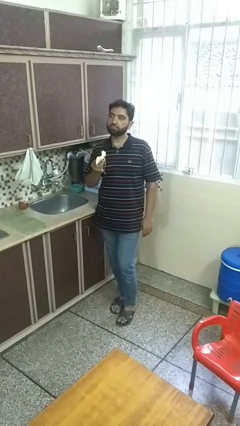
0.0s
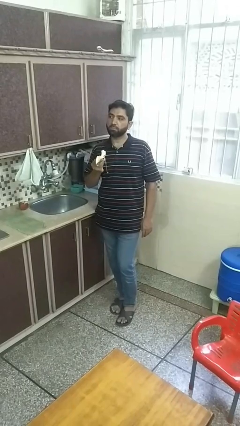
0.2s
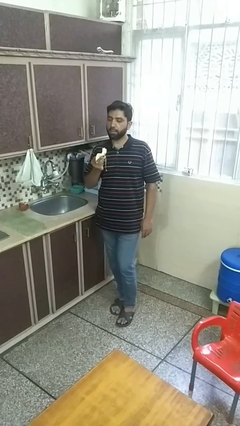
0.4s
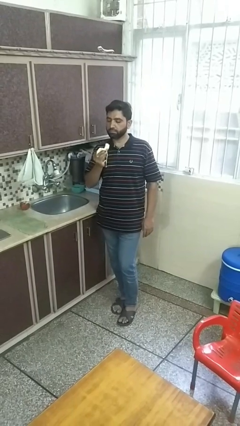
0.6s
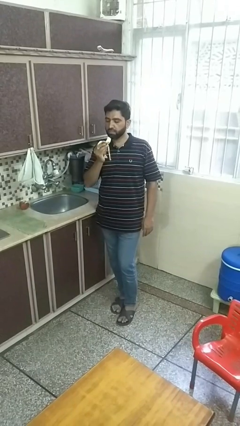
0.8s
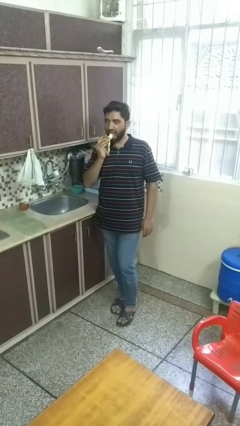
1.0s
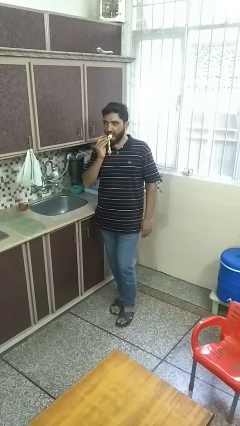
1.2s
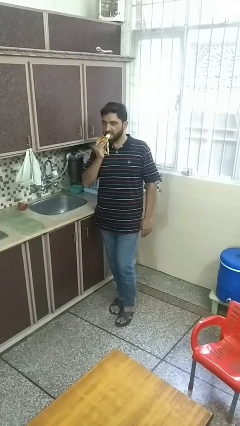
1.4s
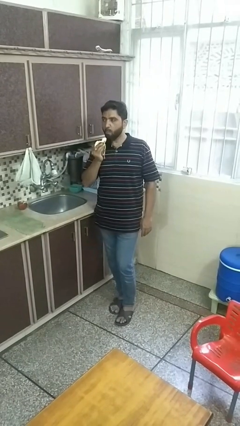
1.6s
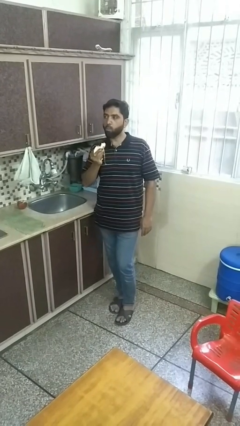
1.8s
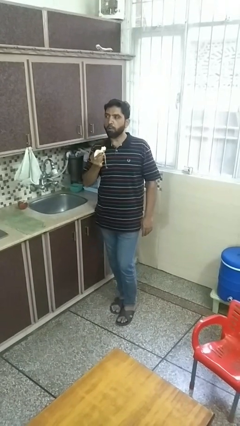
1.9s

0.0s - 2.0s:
person eats banana

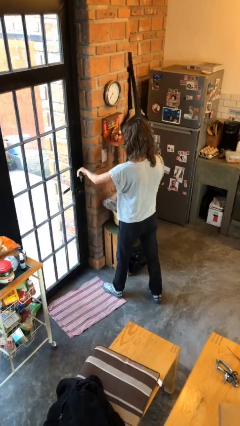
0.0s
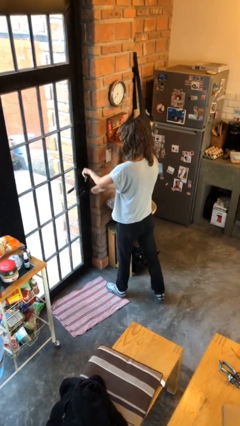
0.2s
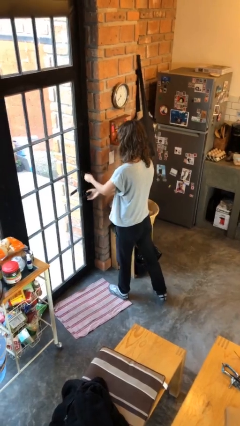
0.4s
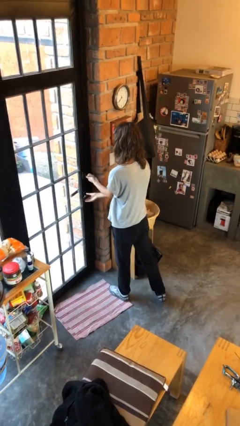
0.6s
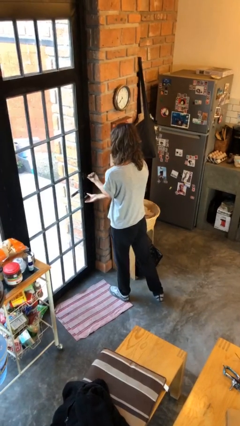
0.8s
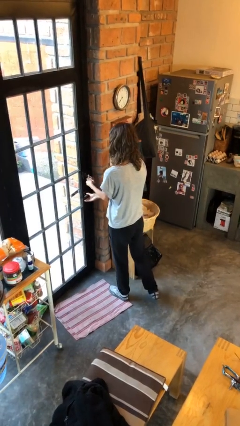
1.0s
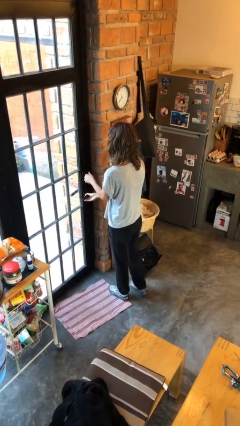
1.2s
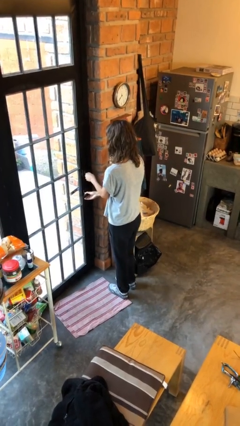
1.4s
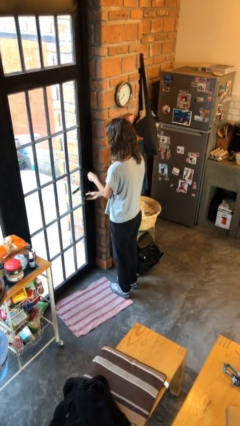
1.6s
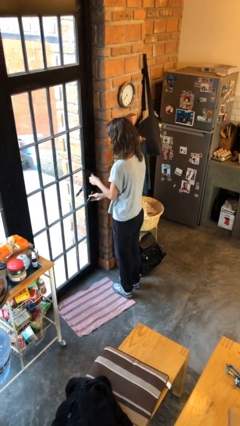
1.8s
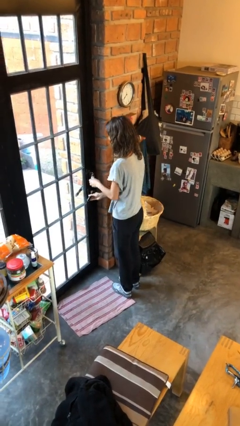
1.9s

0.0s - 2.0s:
person unlocks door with keys

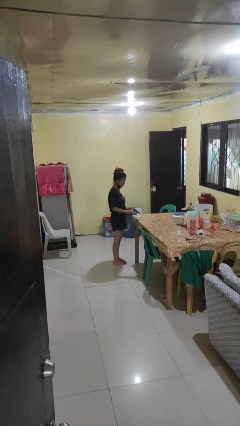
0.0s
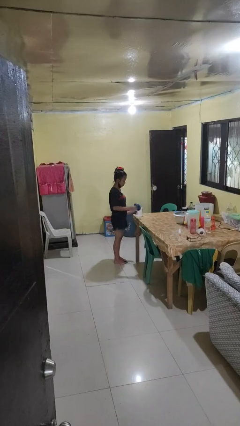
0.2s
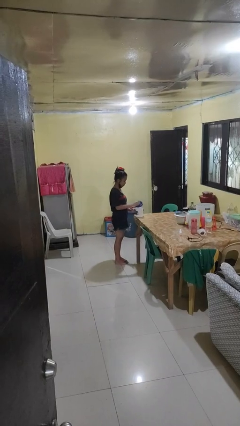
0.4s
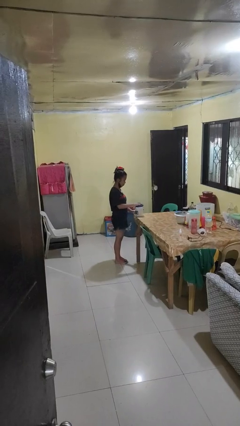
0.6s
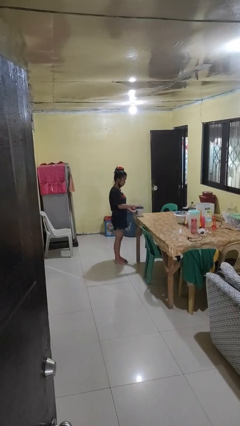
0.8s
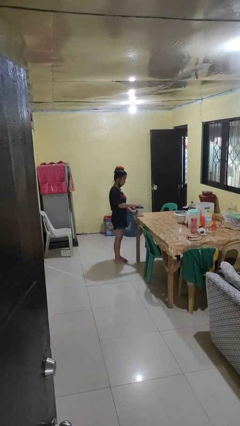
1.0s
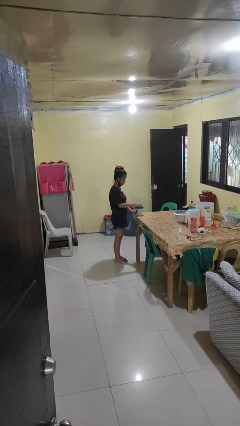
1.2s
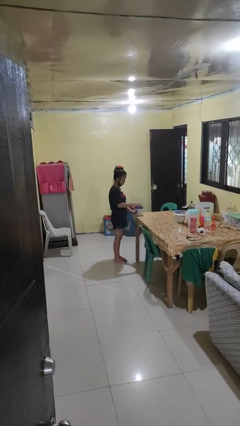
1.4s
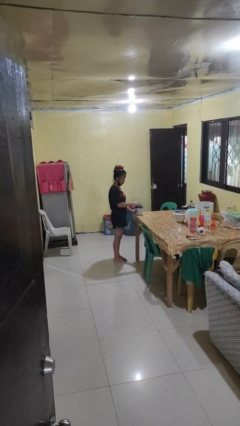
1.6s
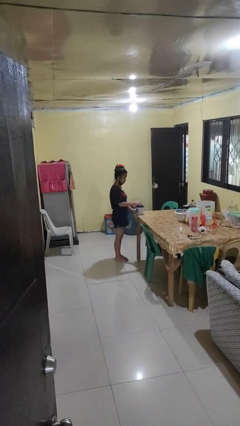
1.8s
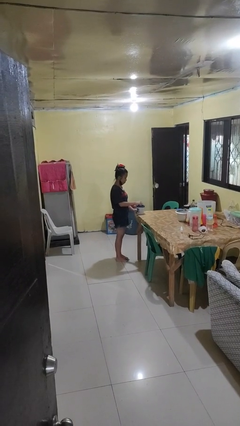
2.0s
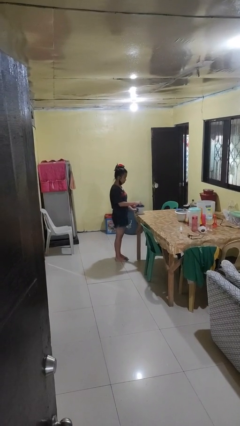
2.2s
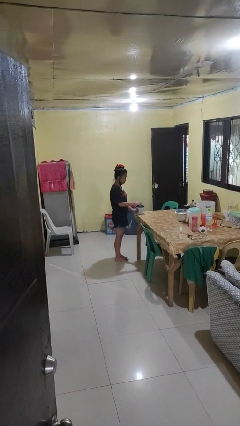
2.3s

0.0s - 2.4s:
person closes jar

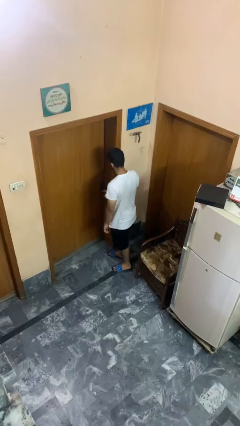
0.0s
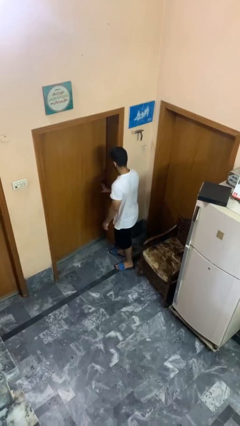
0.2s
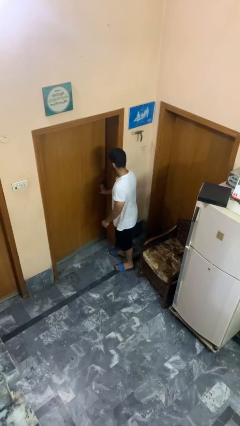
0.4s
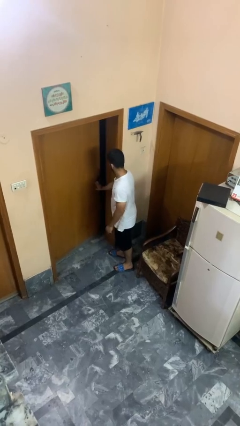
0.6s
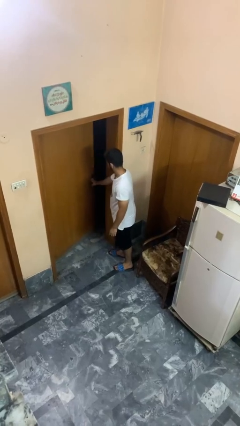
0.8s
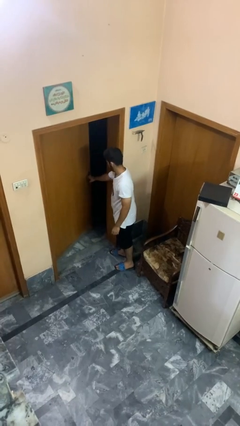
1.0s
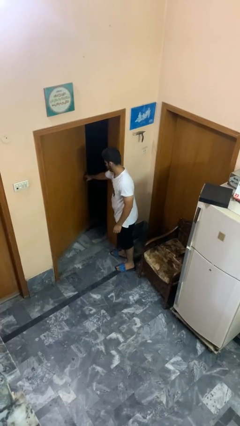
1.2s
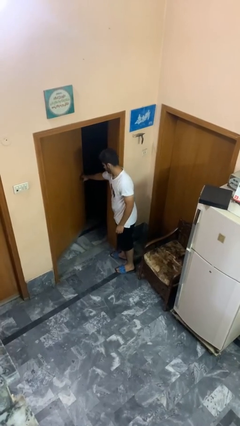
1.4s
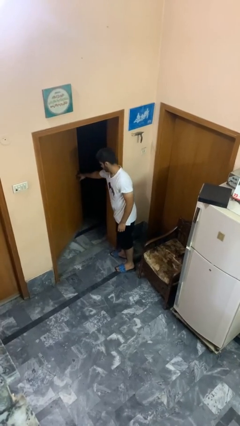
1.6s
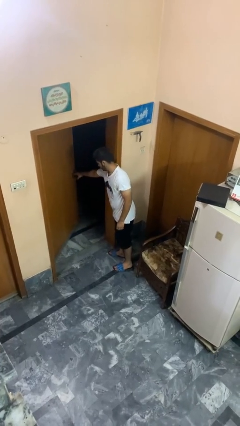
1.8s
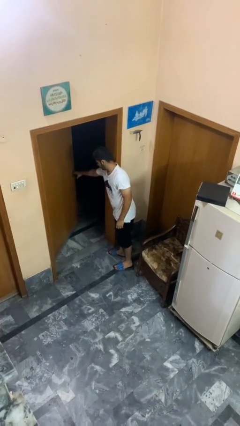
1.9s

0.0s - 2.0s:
person opens facility door

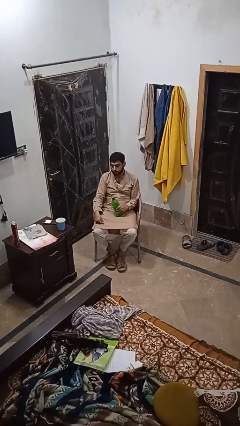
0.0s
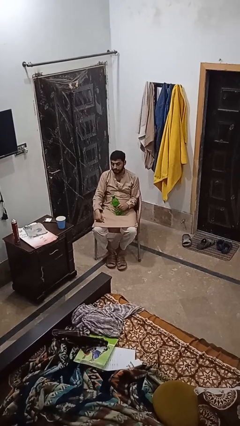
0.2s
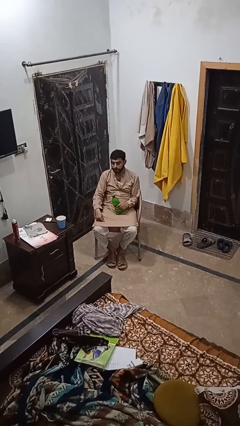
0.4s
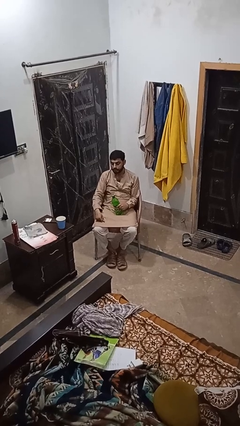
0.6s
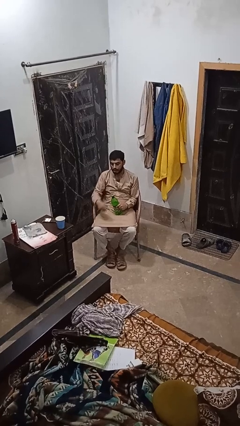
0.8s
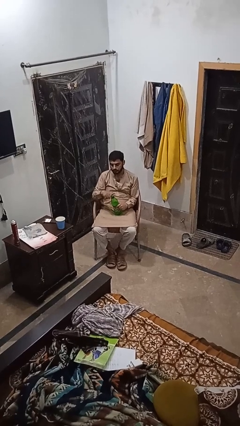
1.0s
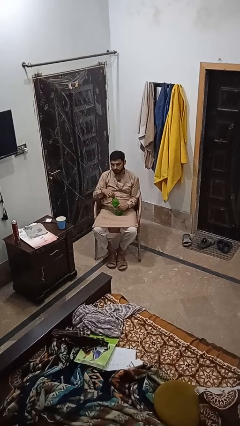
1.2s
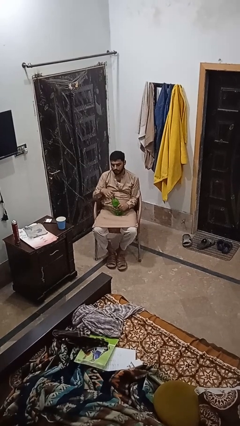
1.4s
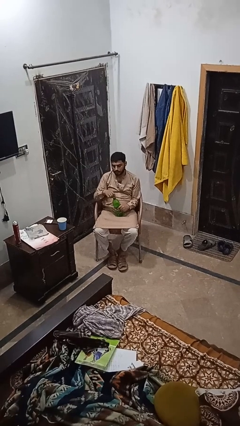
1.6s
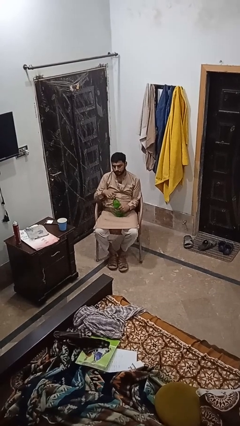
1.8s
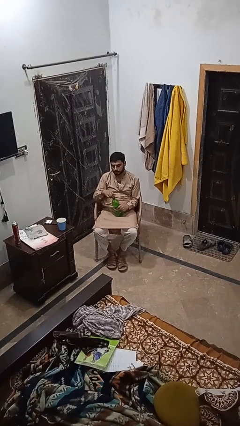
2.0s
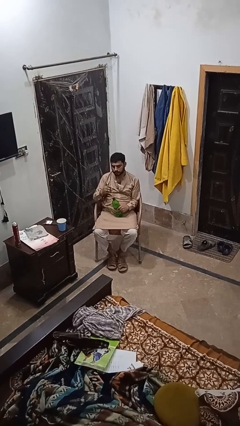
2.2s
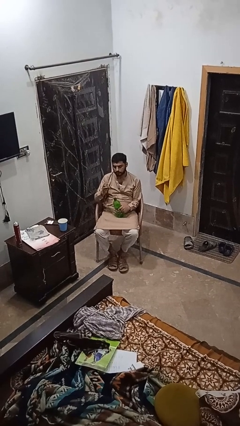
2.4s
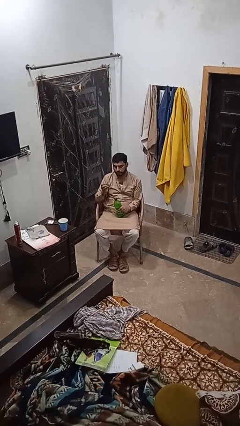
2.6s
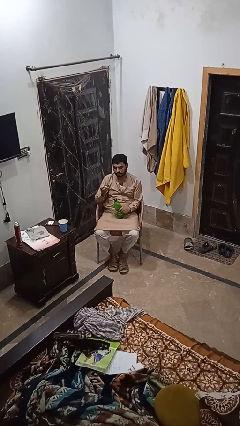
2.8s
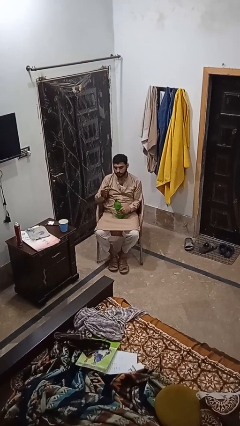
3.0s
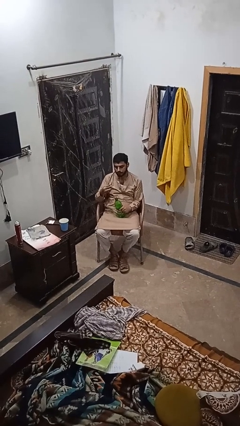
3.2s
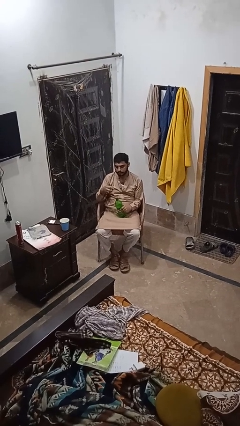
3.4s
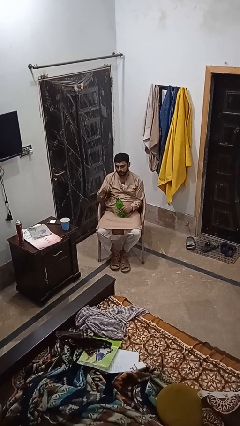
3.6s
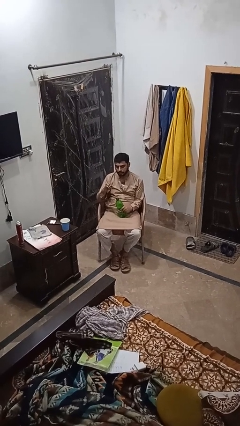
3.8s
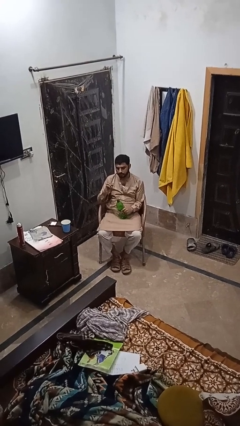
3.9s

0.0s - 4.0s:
person unscrews lid from bottle

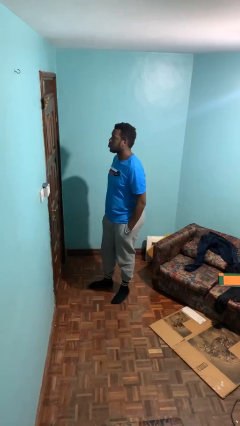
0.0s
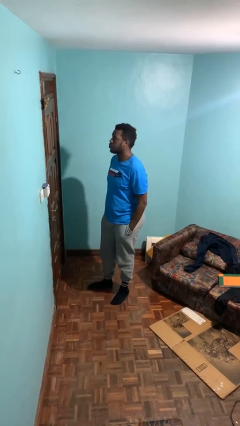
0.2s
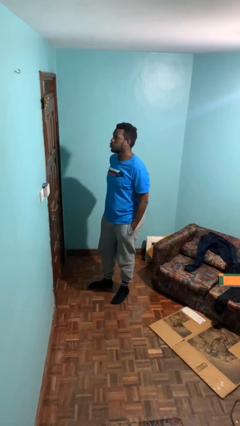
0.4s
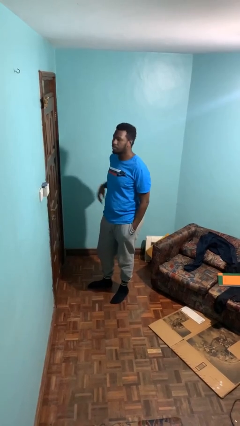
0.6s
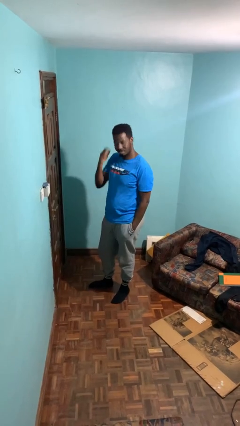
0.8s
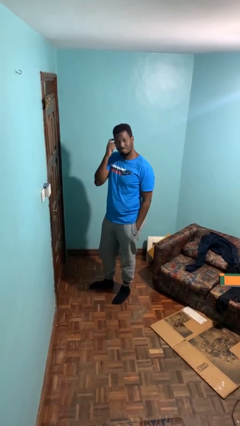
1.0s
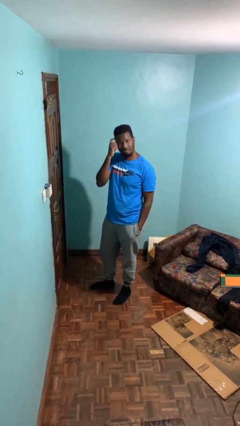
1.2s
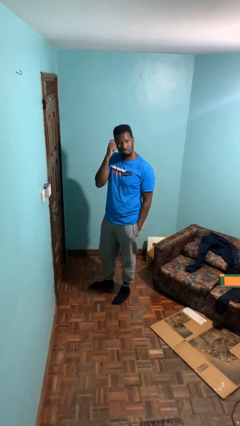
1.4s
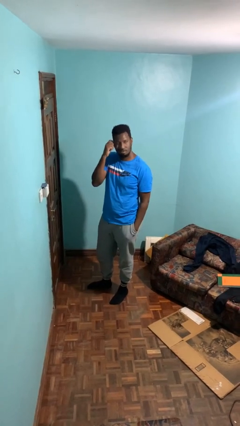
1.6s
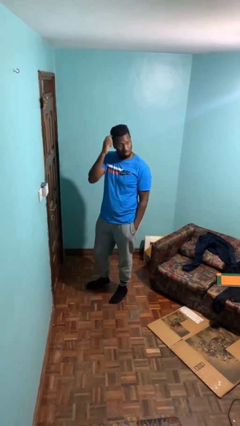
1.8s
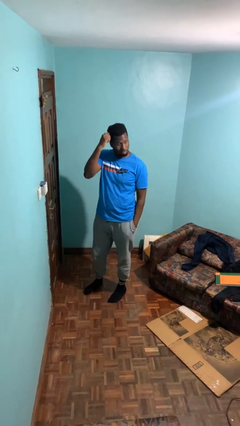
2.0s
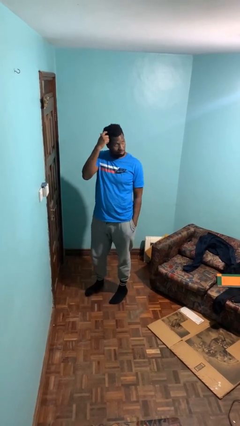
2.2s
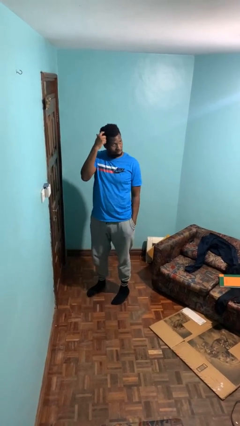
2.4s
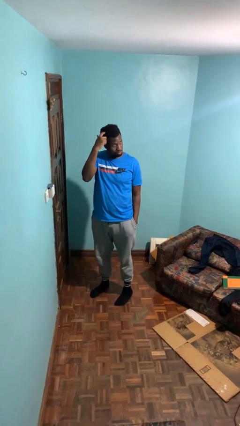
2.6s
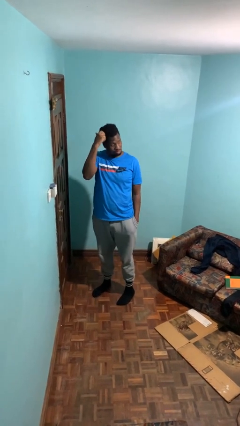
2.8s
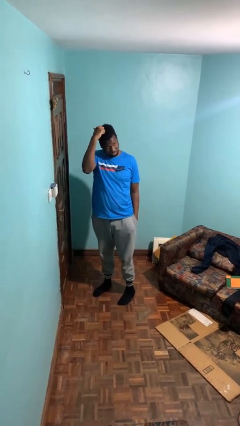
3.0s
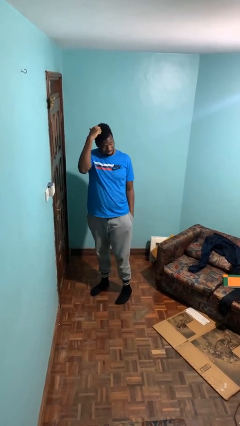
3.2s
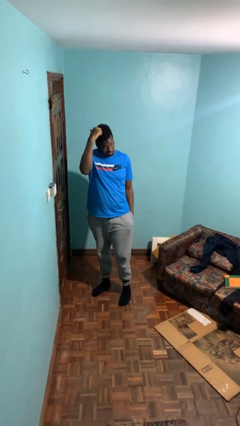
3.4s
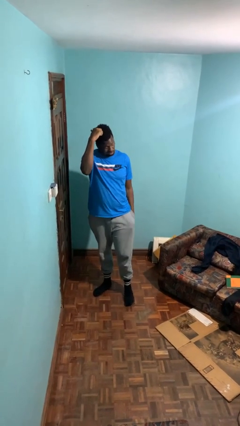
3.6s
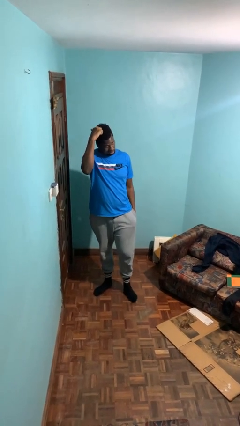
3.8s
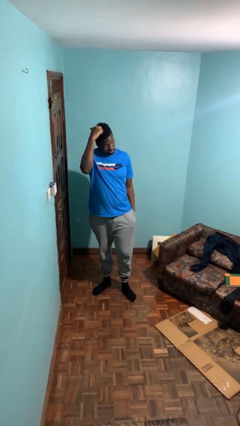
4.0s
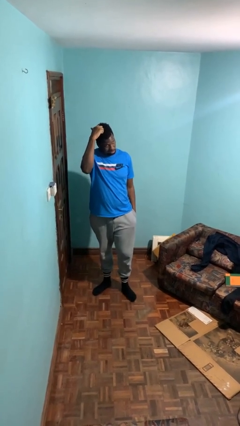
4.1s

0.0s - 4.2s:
person scratches face

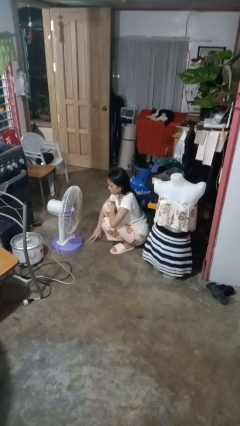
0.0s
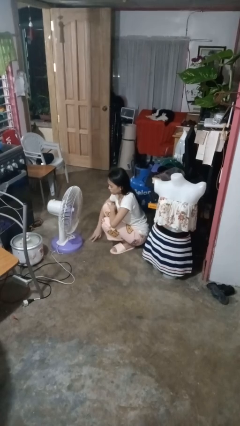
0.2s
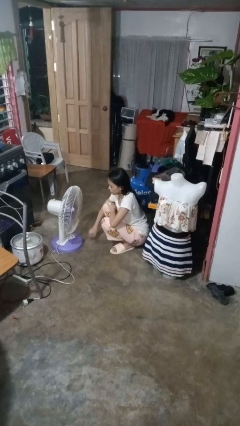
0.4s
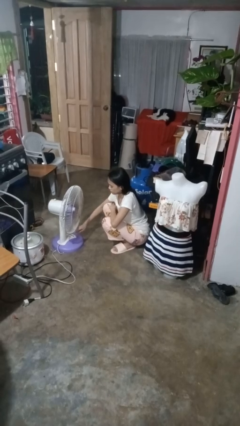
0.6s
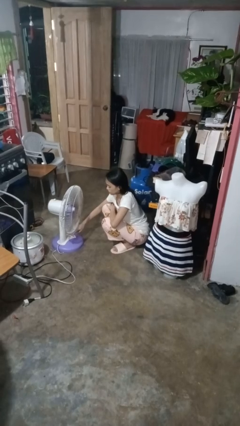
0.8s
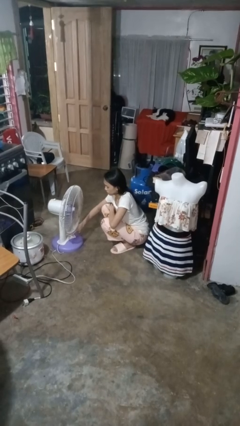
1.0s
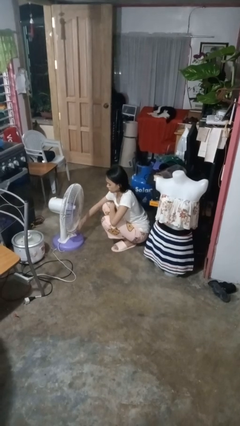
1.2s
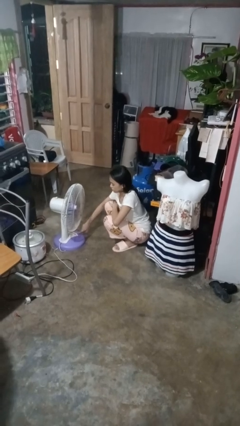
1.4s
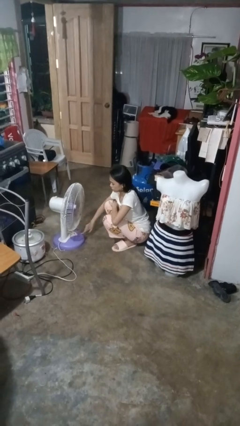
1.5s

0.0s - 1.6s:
person turns on fan
